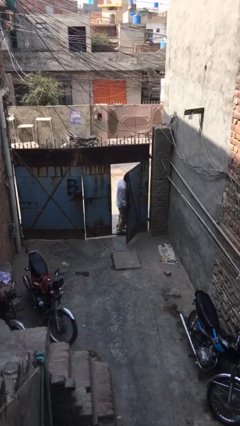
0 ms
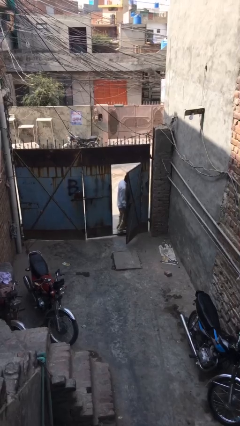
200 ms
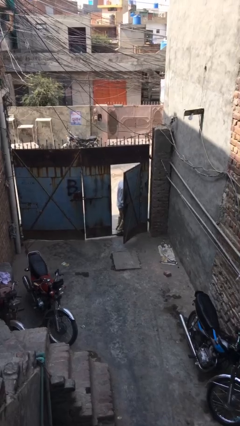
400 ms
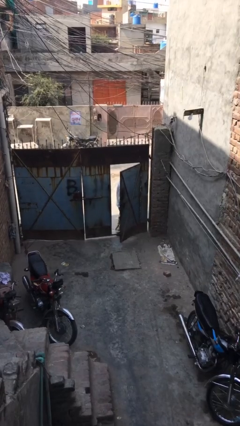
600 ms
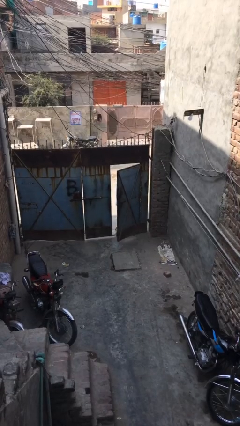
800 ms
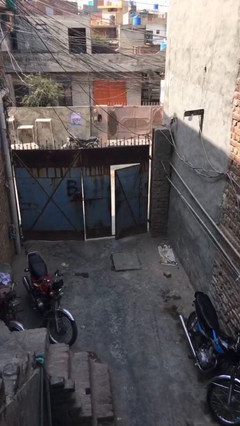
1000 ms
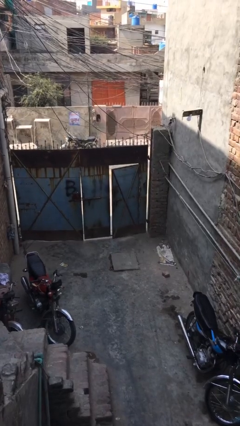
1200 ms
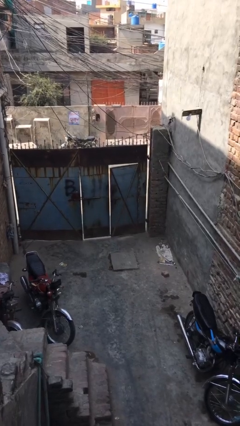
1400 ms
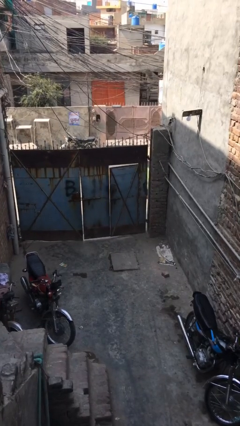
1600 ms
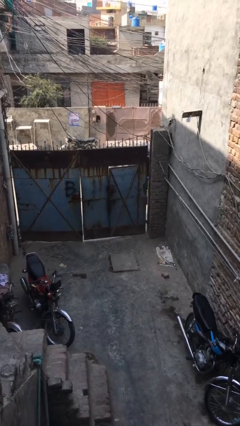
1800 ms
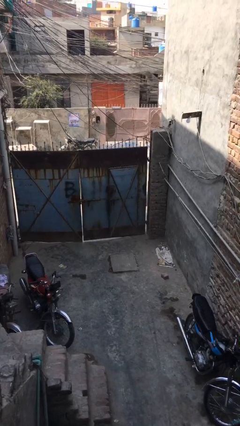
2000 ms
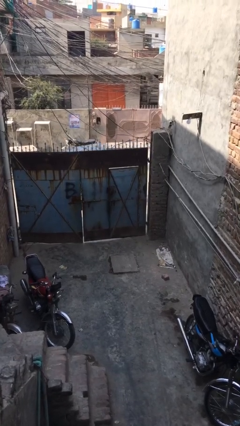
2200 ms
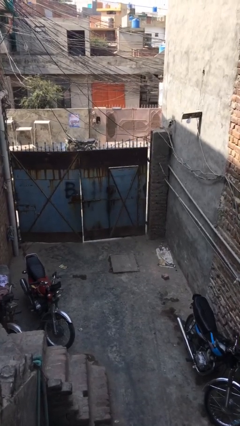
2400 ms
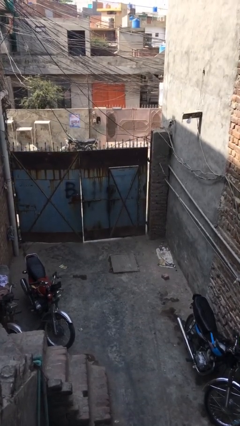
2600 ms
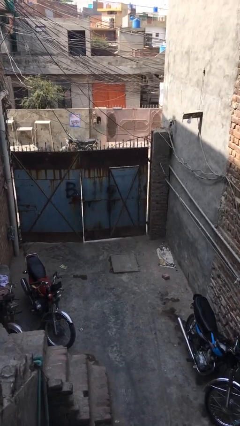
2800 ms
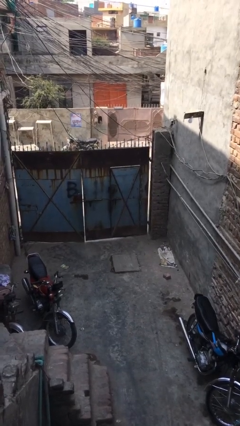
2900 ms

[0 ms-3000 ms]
person closes facility door

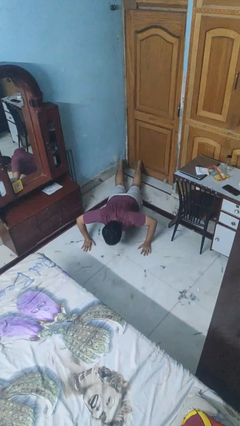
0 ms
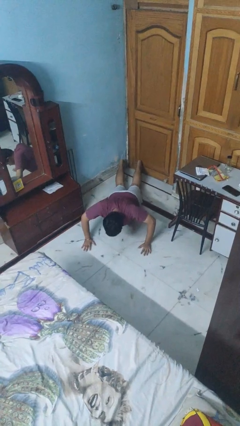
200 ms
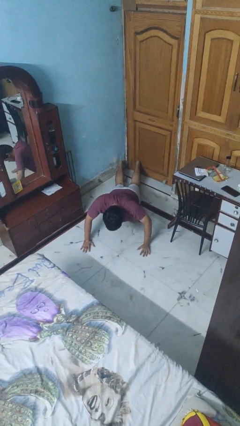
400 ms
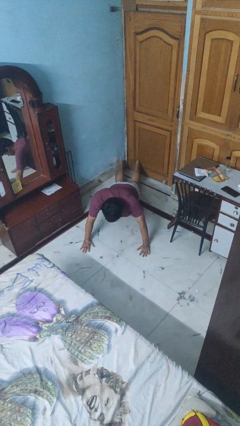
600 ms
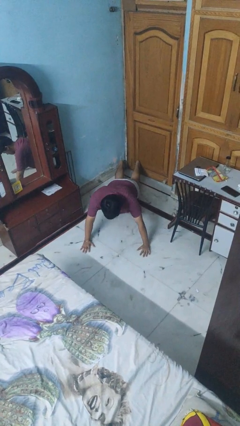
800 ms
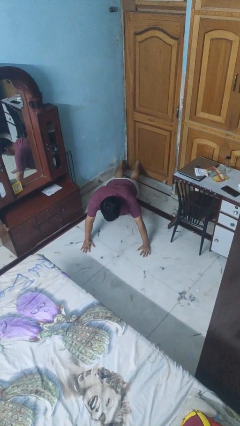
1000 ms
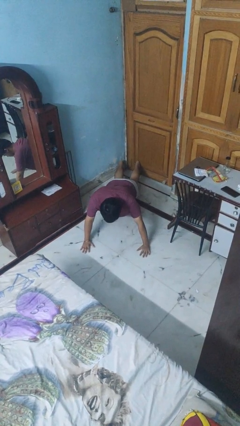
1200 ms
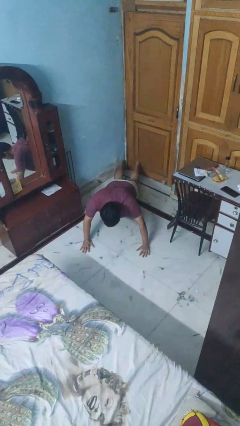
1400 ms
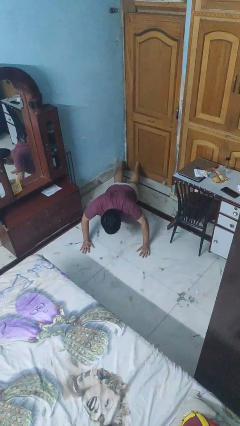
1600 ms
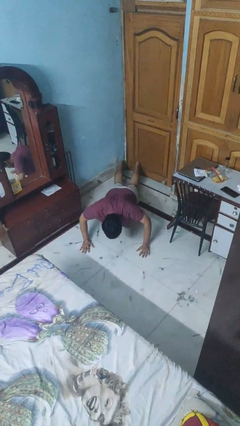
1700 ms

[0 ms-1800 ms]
person exercises with pushup

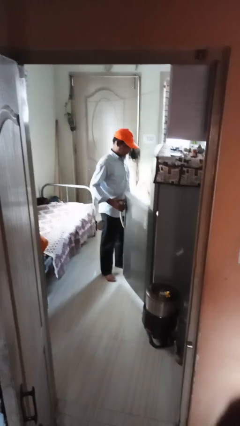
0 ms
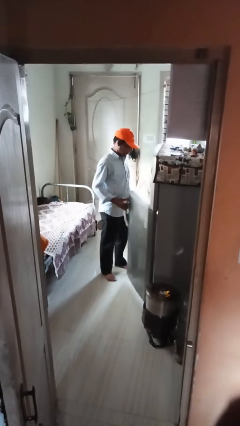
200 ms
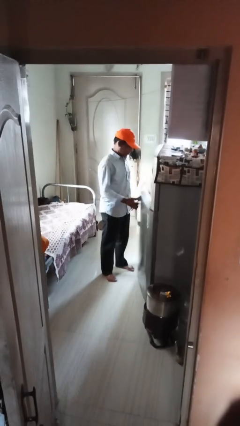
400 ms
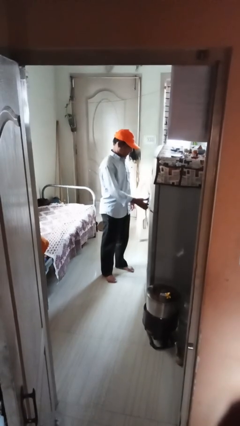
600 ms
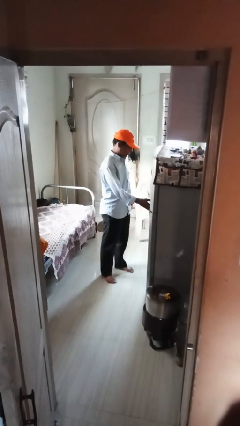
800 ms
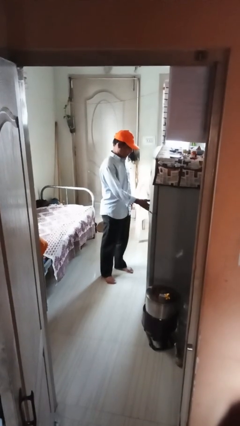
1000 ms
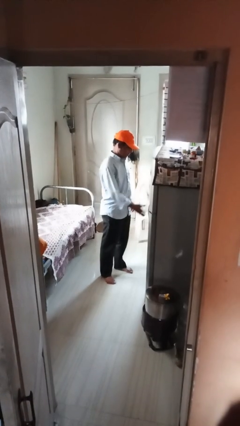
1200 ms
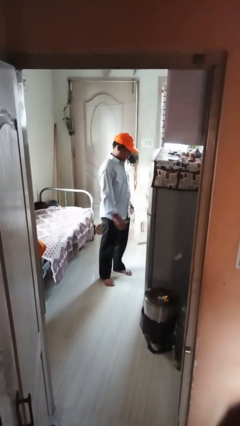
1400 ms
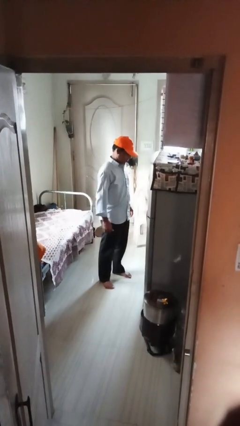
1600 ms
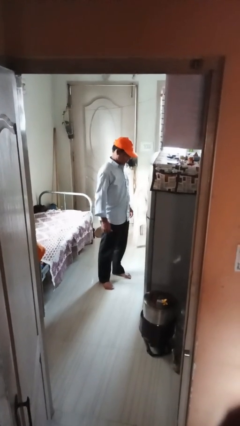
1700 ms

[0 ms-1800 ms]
person closes refrigerator

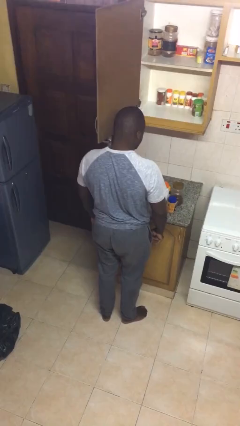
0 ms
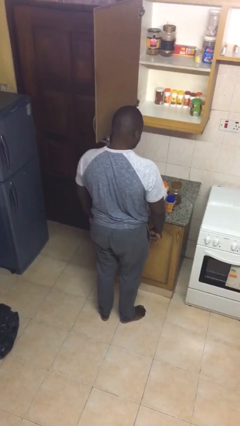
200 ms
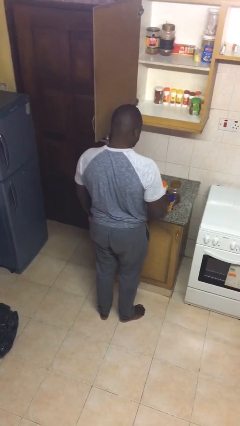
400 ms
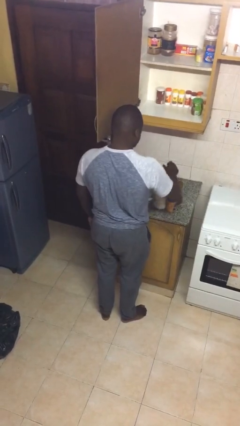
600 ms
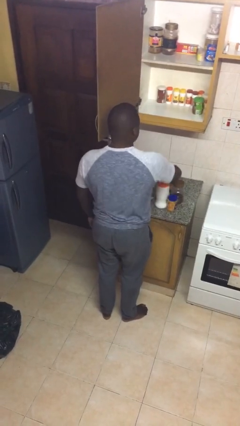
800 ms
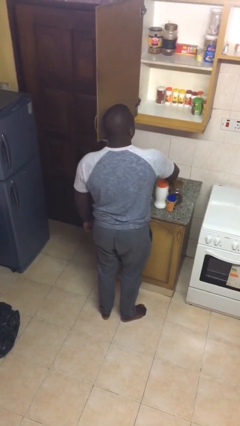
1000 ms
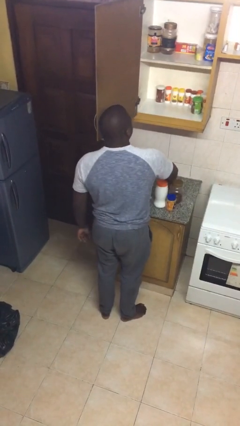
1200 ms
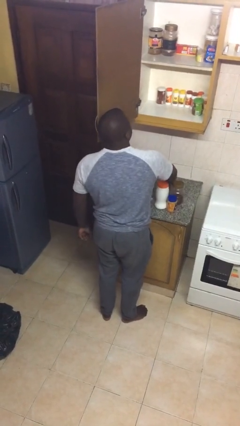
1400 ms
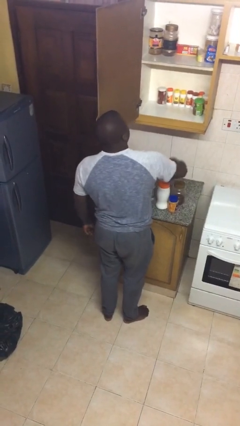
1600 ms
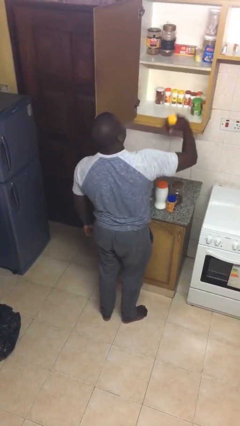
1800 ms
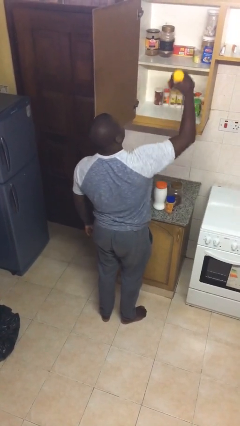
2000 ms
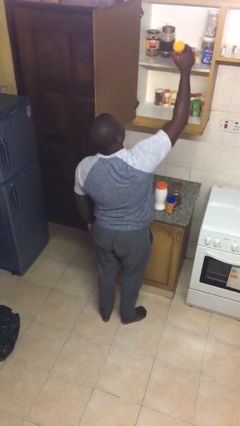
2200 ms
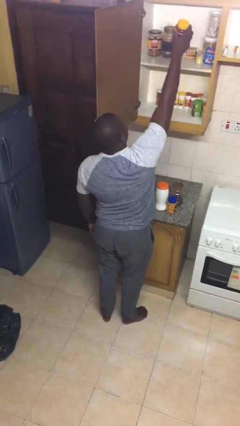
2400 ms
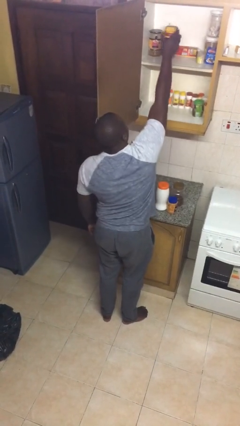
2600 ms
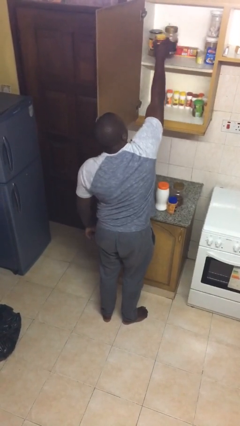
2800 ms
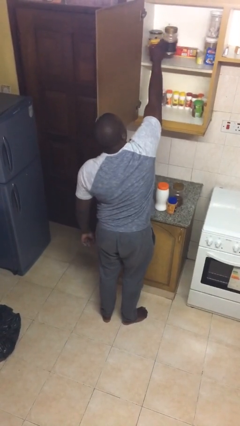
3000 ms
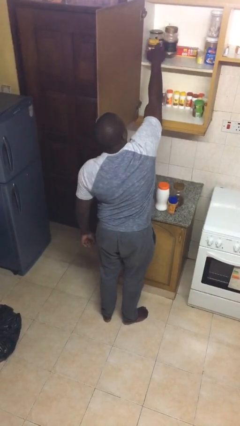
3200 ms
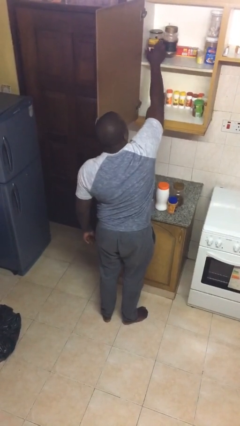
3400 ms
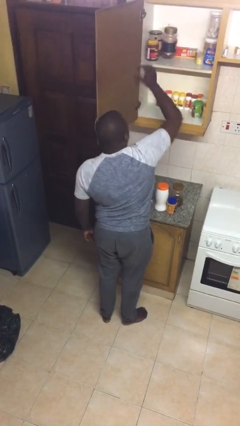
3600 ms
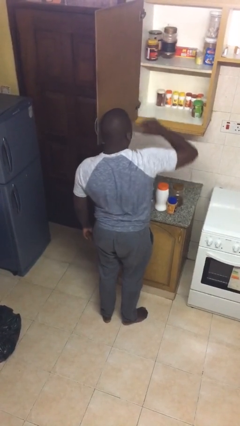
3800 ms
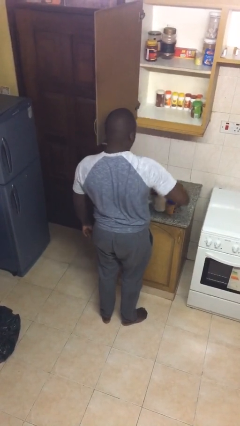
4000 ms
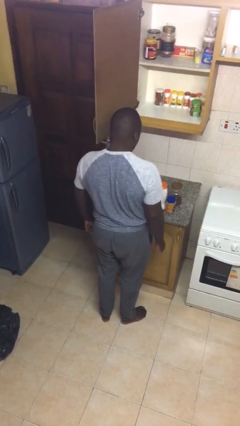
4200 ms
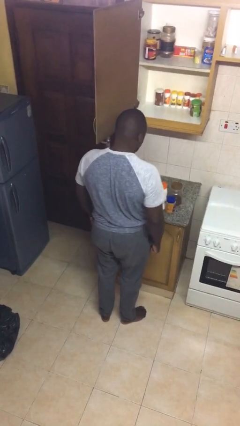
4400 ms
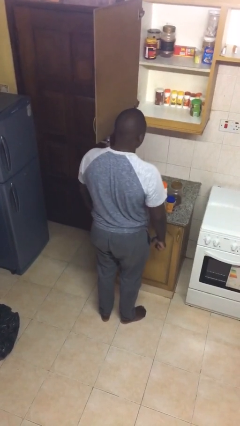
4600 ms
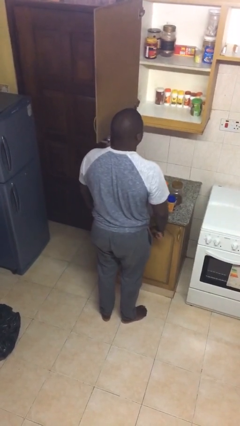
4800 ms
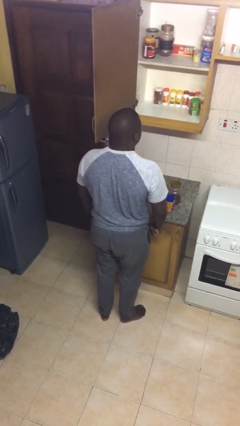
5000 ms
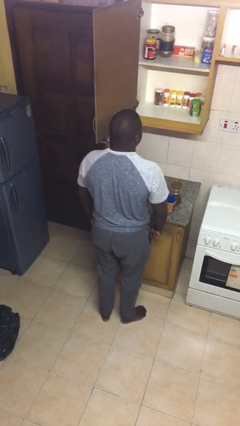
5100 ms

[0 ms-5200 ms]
person puts object in cabinet

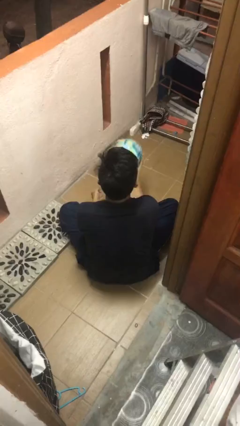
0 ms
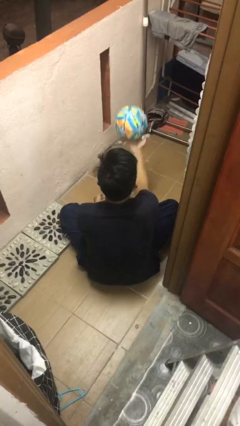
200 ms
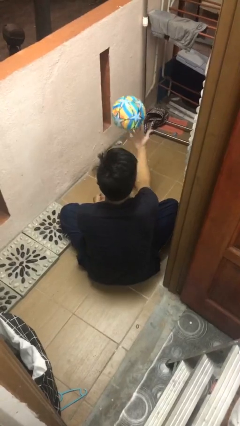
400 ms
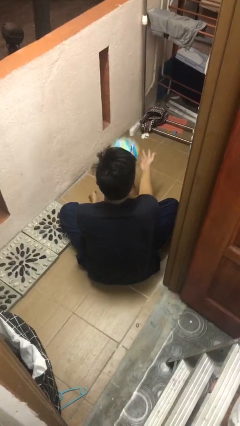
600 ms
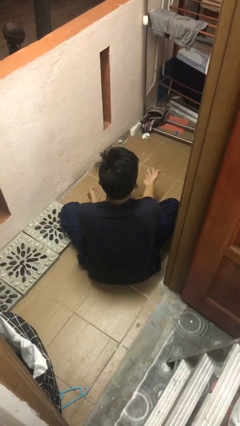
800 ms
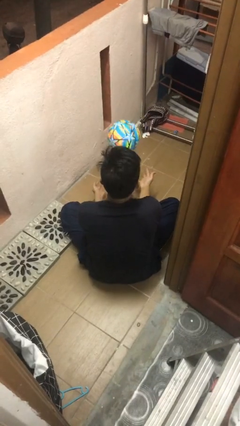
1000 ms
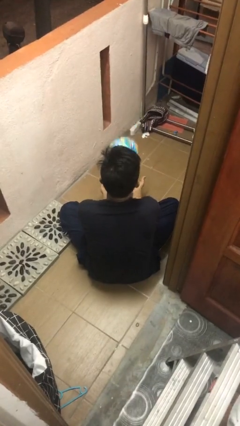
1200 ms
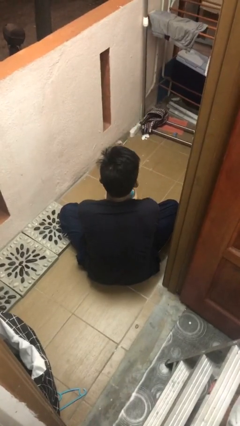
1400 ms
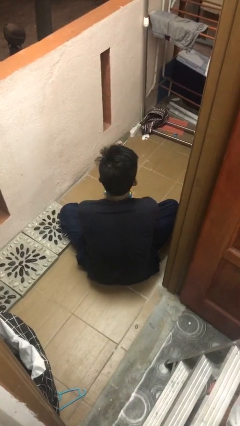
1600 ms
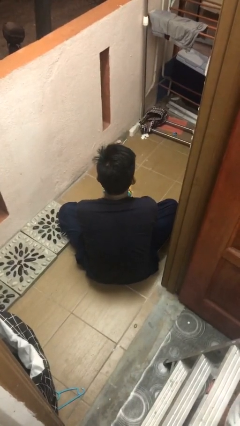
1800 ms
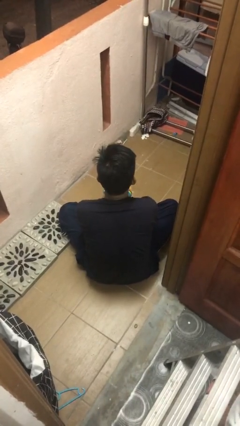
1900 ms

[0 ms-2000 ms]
person bounces ball on floor

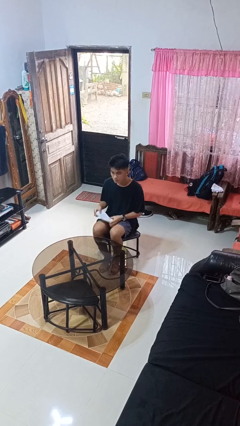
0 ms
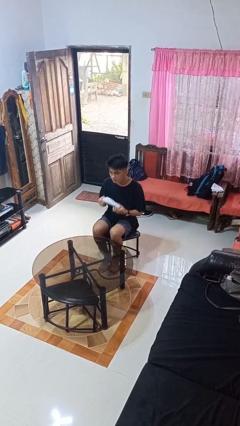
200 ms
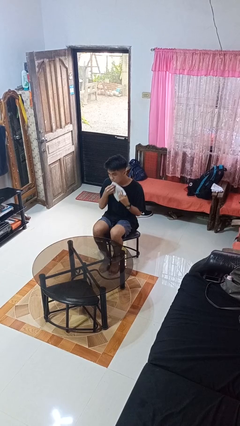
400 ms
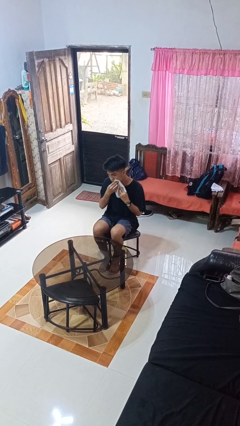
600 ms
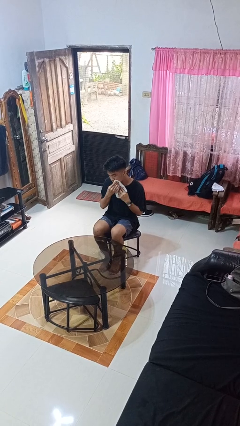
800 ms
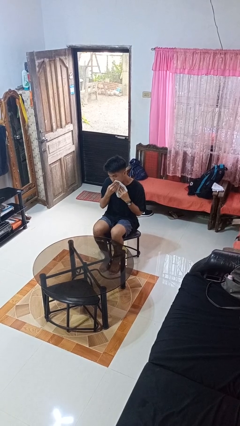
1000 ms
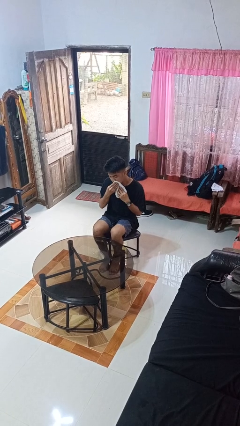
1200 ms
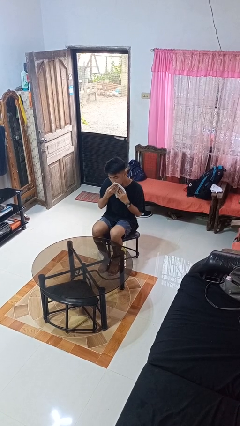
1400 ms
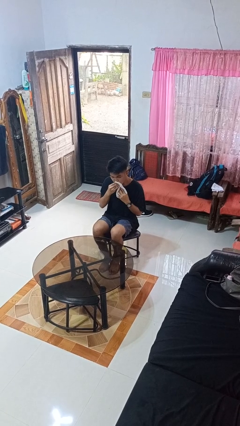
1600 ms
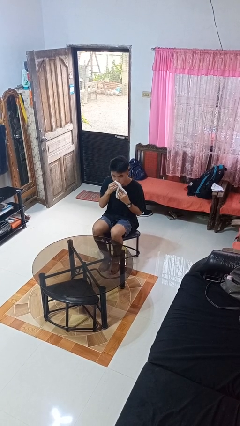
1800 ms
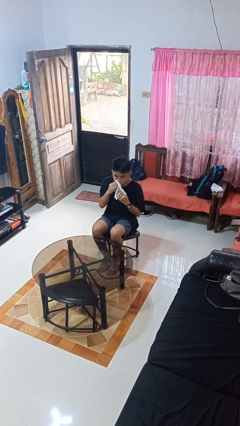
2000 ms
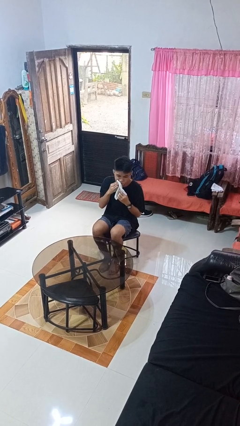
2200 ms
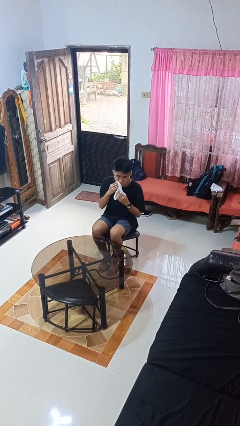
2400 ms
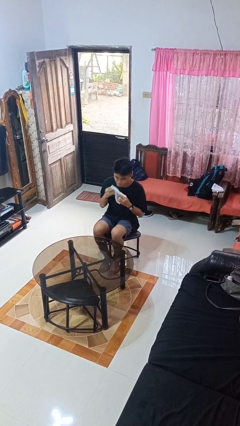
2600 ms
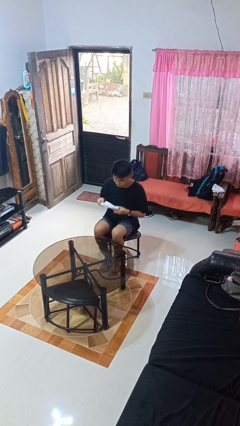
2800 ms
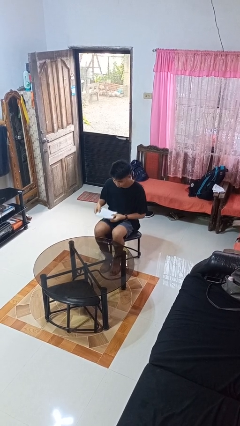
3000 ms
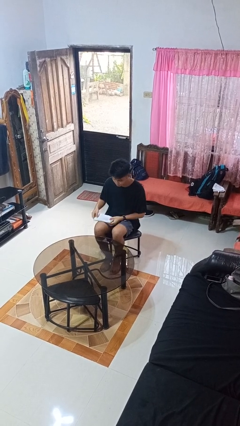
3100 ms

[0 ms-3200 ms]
person wipes mouth with napkin

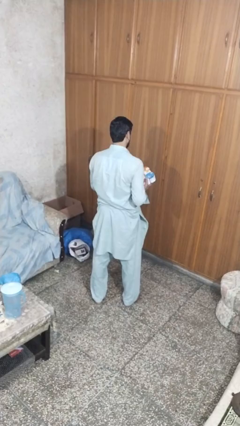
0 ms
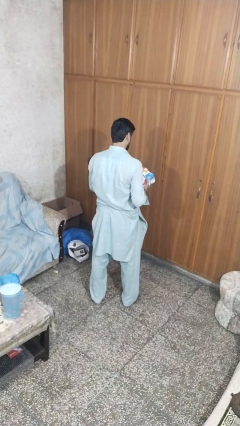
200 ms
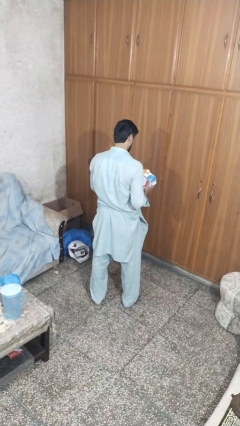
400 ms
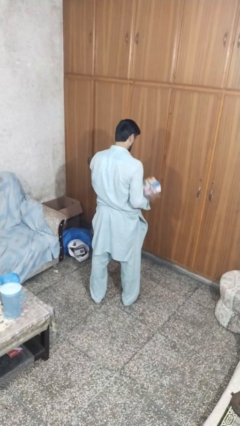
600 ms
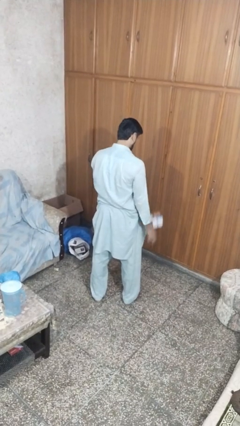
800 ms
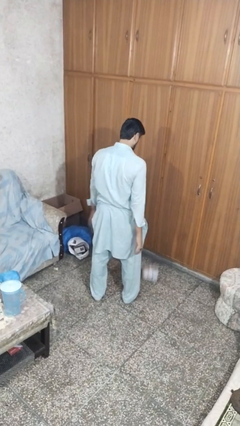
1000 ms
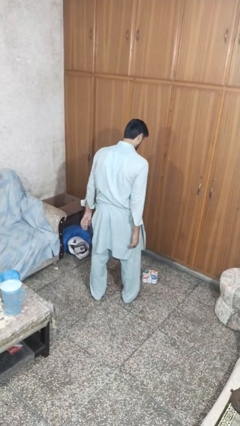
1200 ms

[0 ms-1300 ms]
person picks up object from floor
